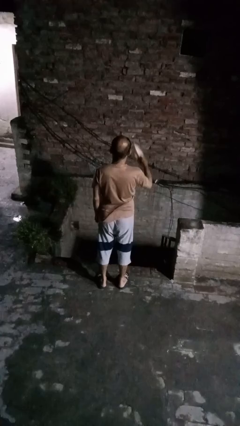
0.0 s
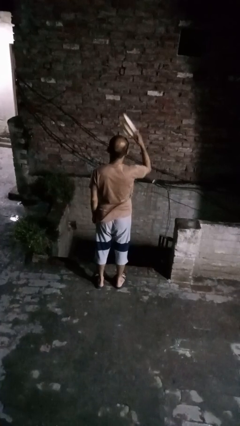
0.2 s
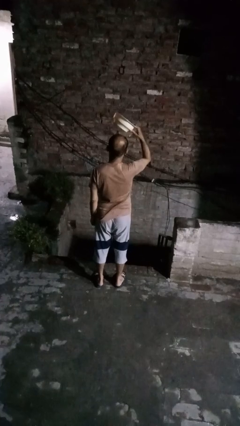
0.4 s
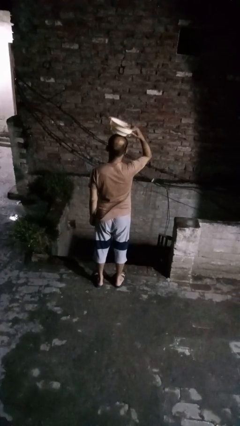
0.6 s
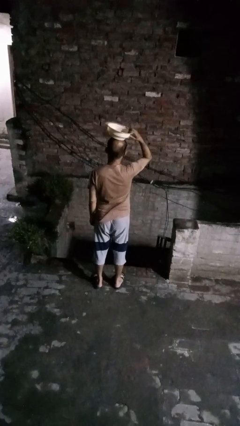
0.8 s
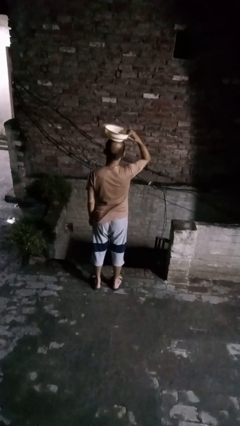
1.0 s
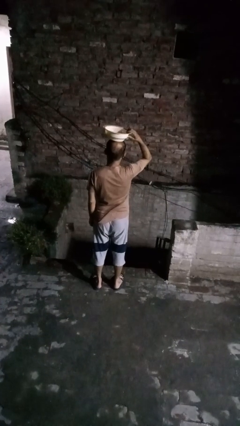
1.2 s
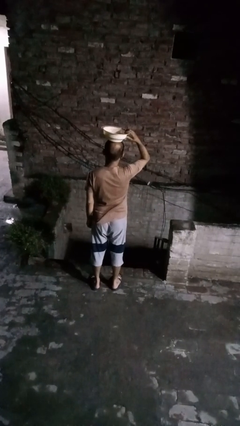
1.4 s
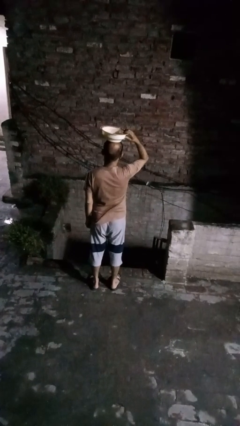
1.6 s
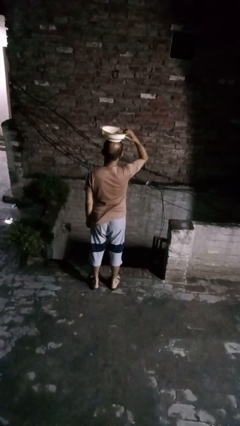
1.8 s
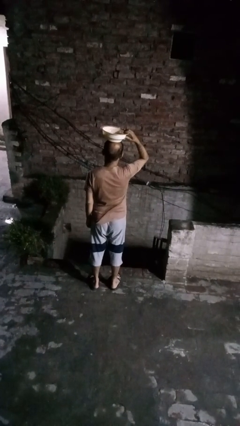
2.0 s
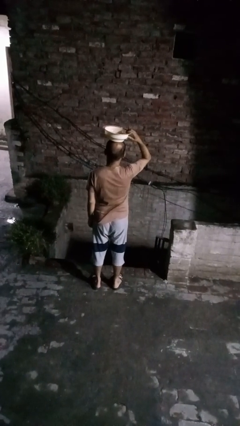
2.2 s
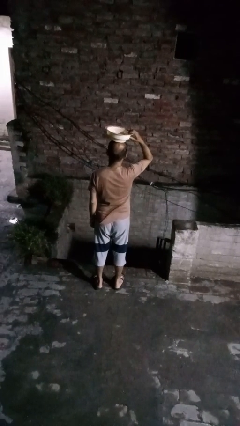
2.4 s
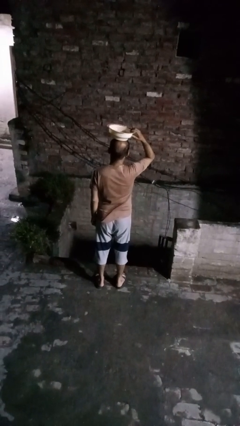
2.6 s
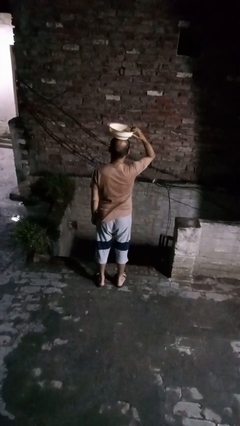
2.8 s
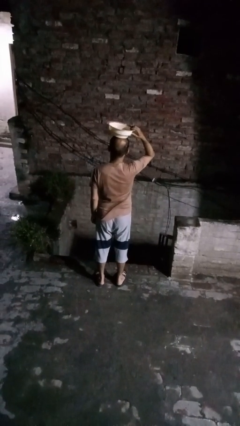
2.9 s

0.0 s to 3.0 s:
person holds object above head

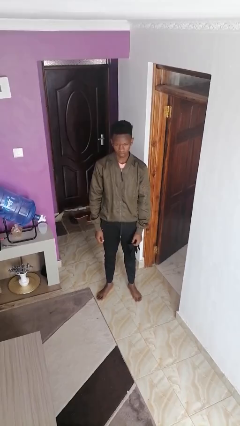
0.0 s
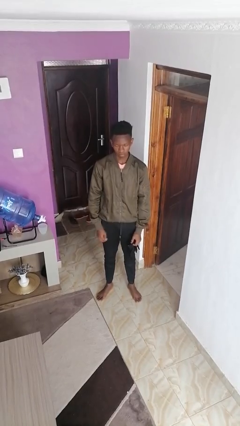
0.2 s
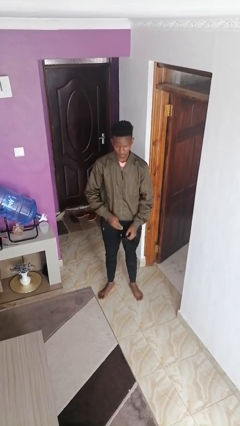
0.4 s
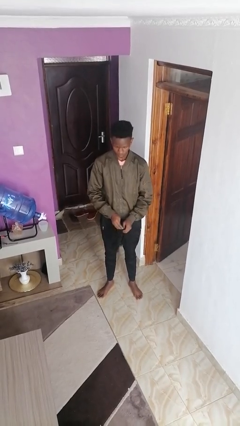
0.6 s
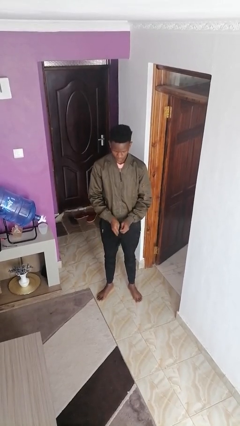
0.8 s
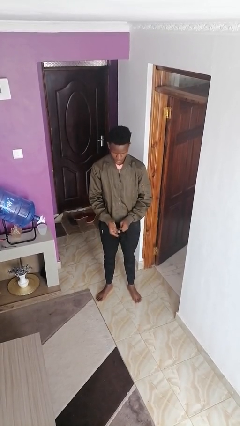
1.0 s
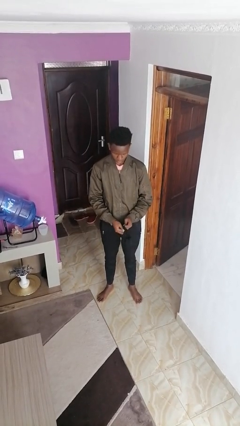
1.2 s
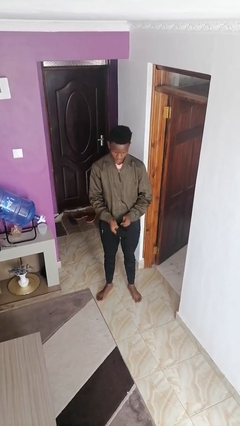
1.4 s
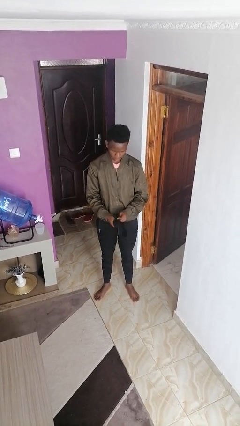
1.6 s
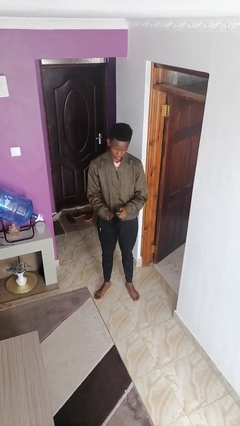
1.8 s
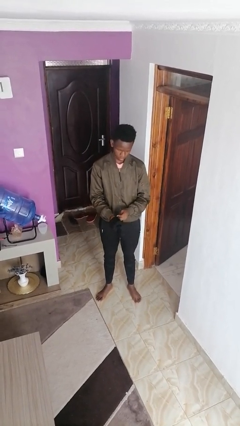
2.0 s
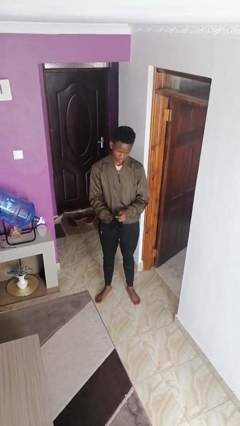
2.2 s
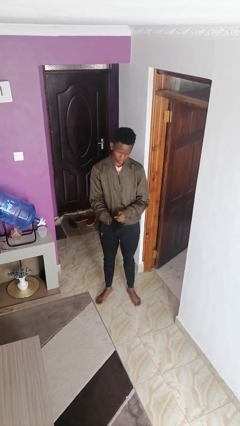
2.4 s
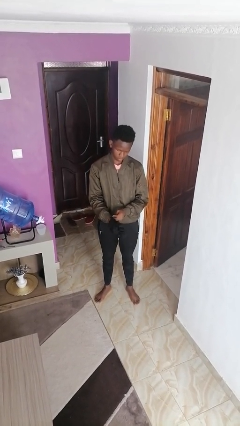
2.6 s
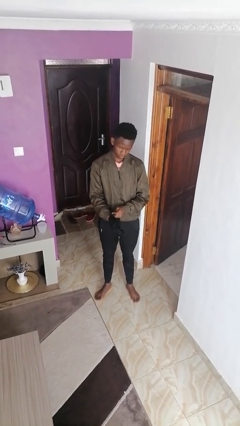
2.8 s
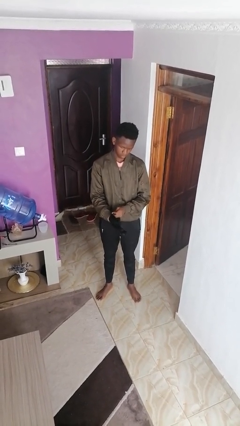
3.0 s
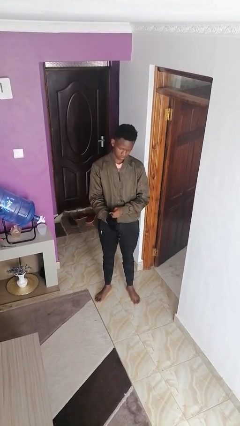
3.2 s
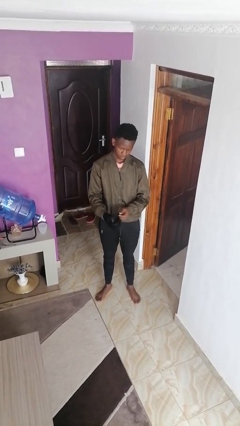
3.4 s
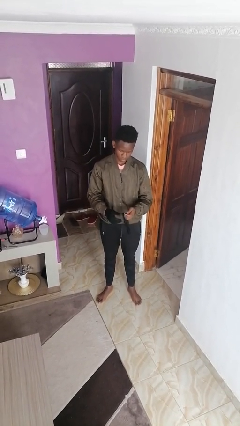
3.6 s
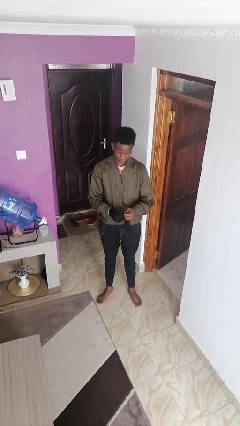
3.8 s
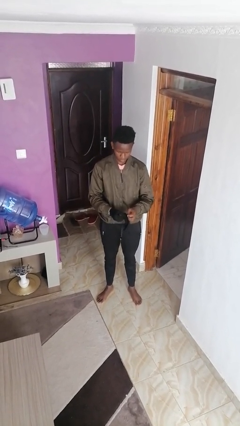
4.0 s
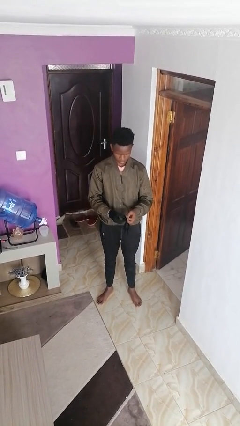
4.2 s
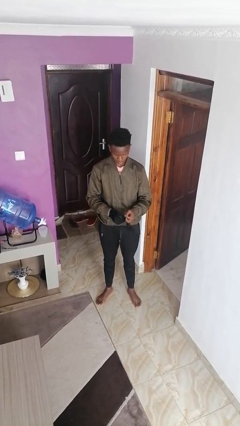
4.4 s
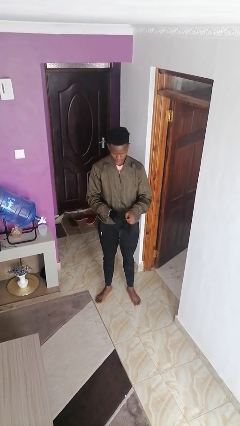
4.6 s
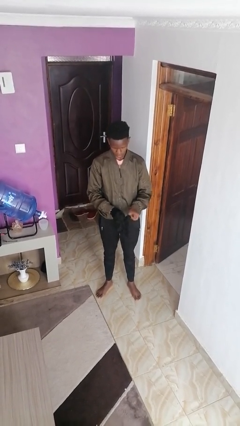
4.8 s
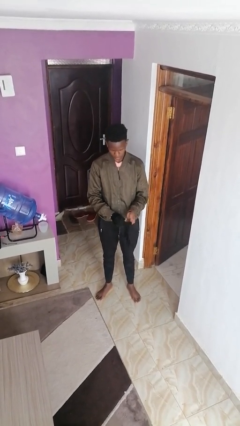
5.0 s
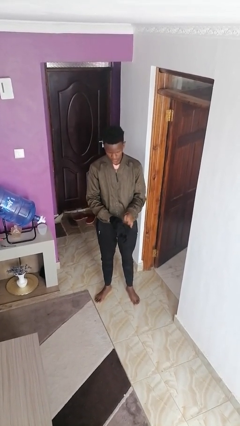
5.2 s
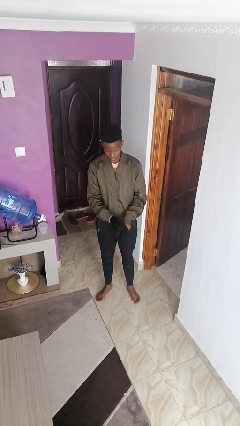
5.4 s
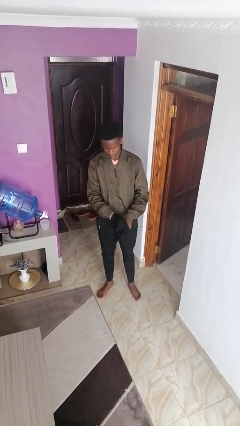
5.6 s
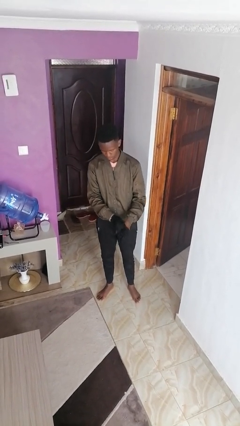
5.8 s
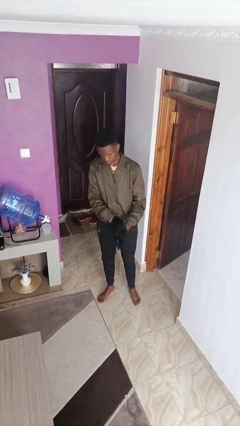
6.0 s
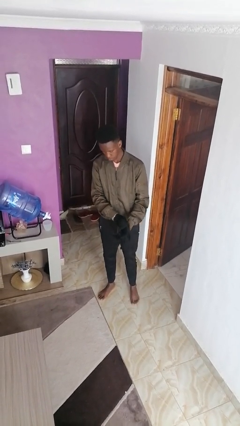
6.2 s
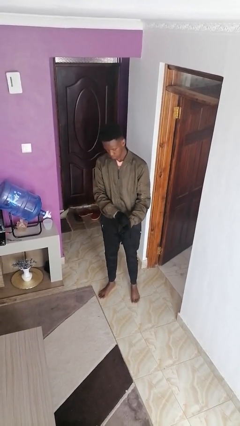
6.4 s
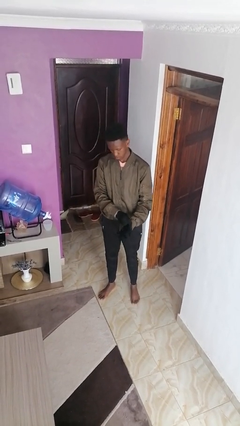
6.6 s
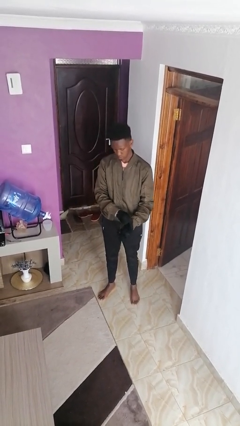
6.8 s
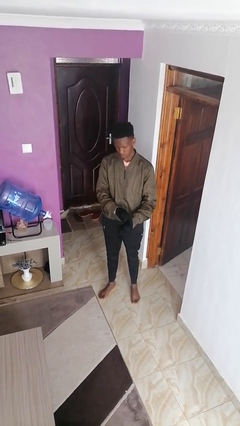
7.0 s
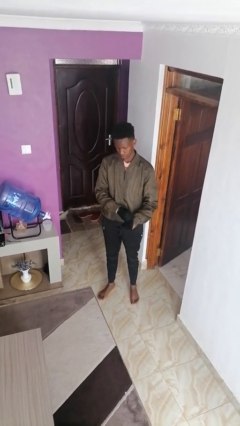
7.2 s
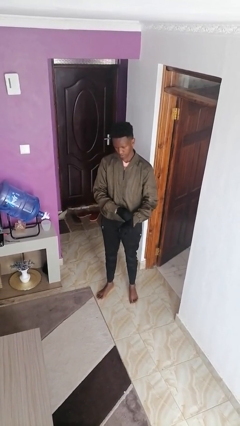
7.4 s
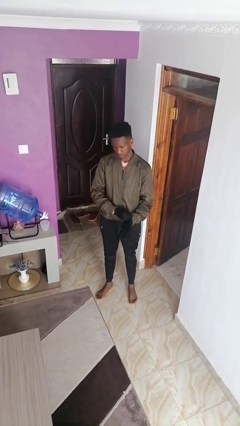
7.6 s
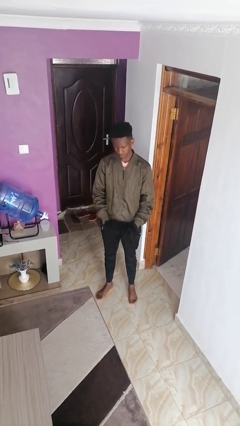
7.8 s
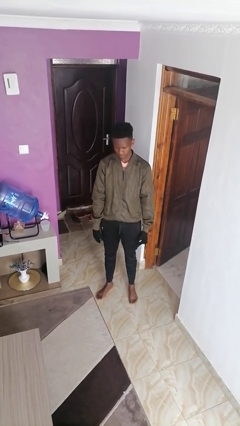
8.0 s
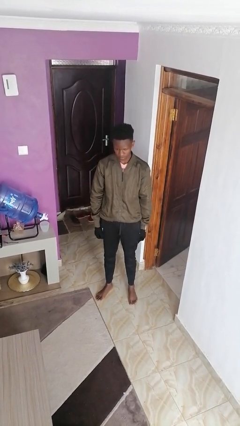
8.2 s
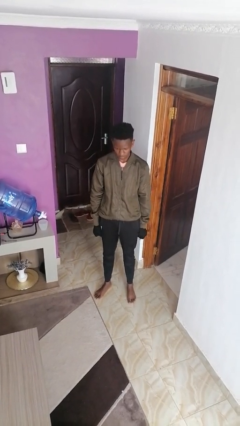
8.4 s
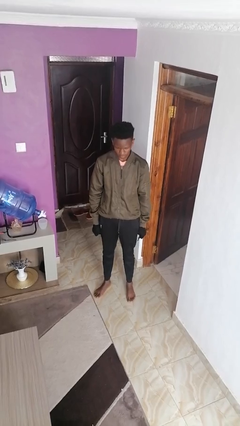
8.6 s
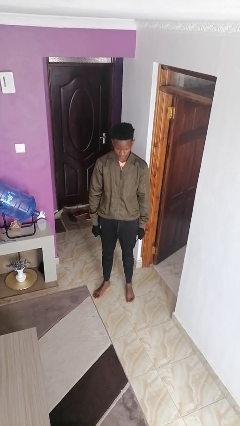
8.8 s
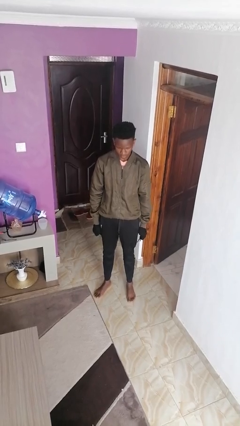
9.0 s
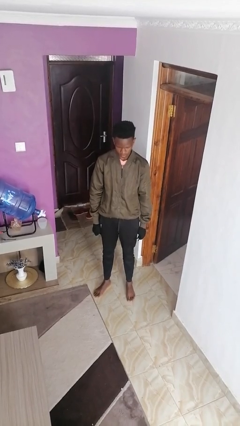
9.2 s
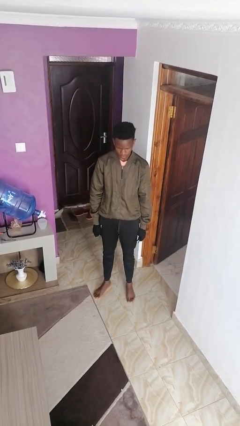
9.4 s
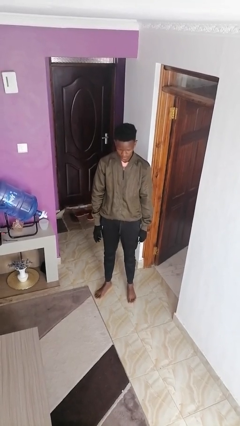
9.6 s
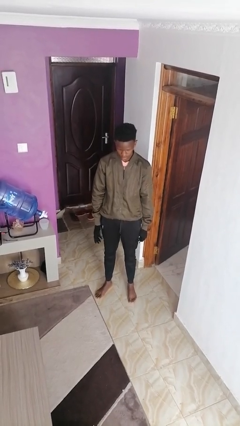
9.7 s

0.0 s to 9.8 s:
person puts on gloves

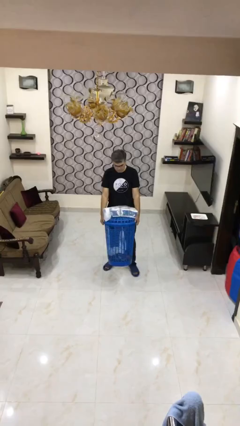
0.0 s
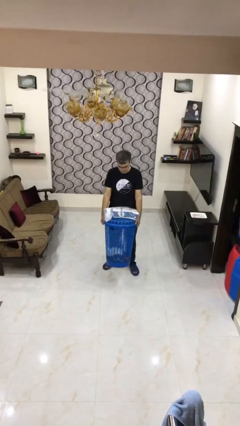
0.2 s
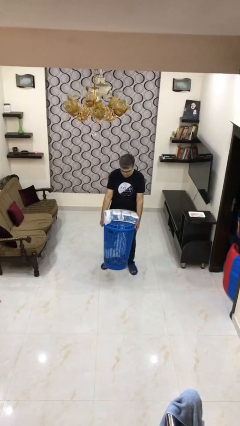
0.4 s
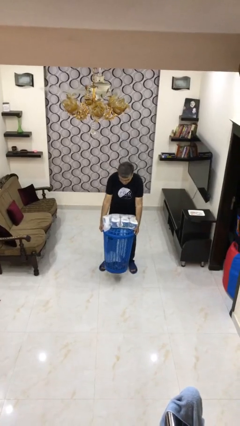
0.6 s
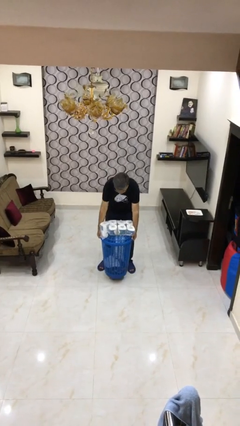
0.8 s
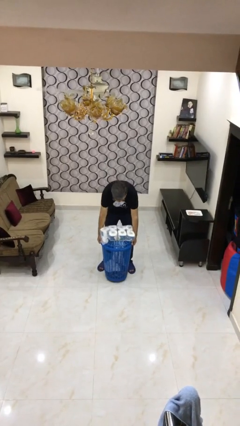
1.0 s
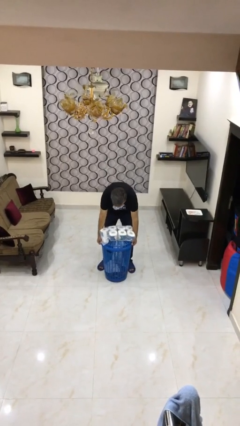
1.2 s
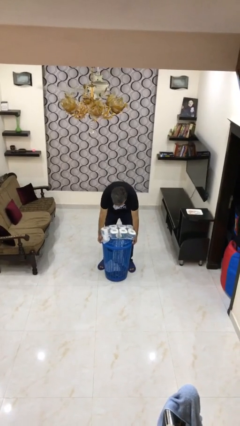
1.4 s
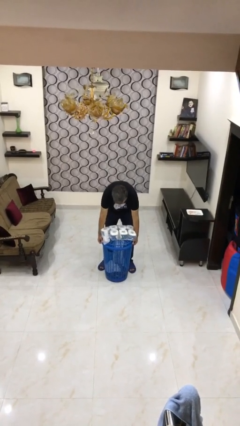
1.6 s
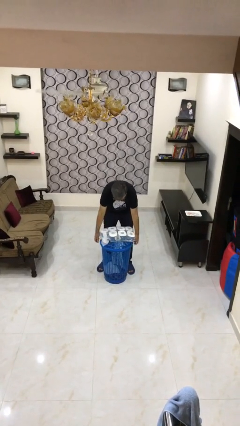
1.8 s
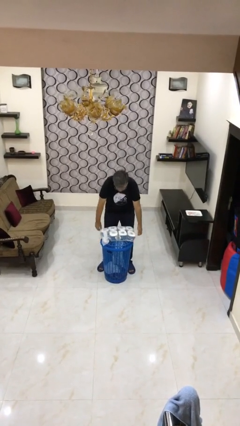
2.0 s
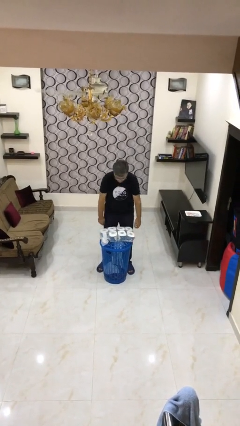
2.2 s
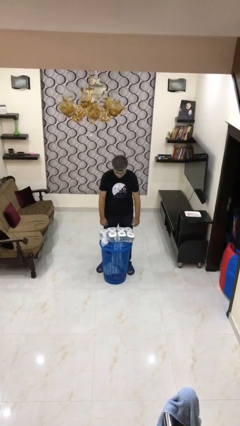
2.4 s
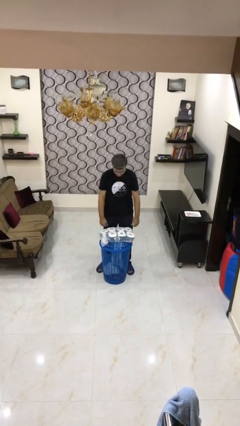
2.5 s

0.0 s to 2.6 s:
person puts down object on floor

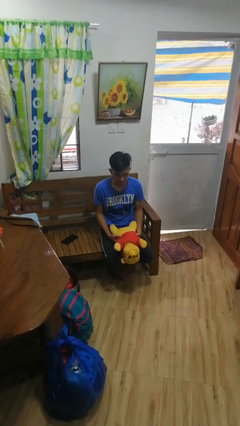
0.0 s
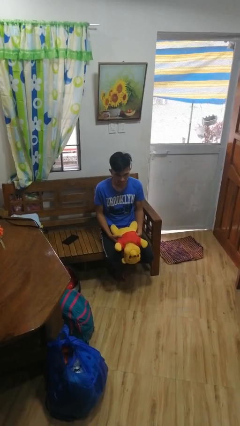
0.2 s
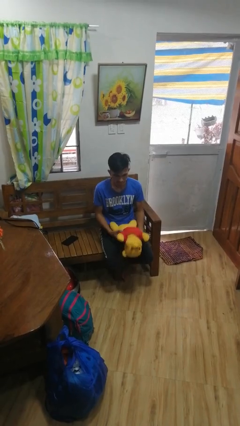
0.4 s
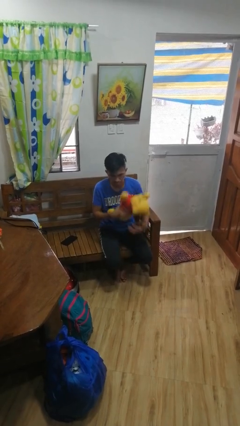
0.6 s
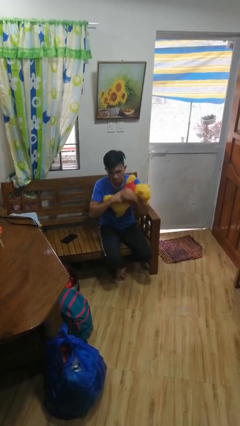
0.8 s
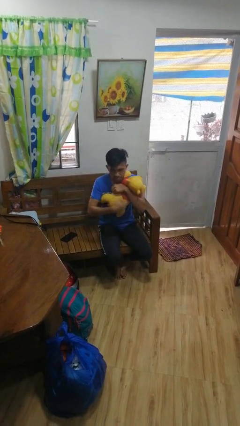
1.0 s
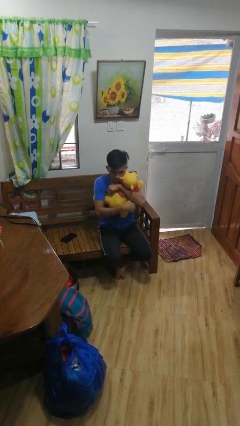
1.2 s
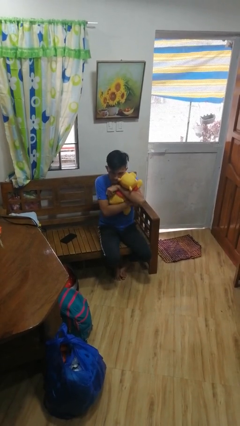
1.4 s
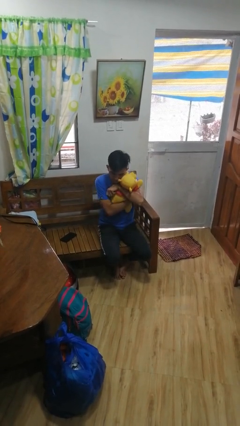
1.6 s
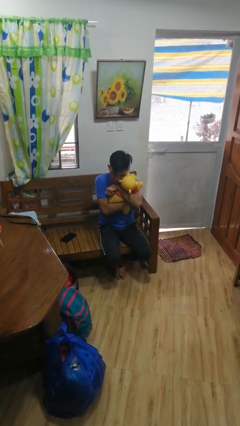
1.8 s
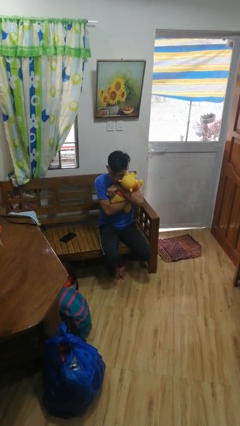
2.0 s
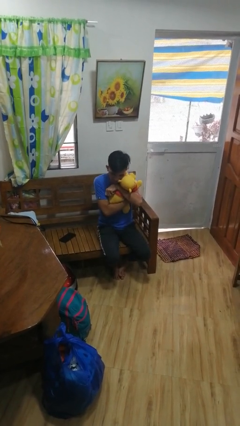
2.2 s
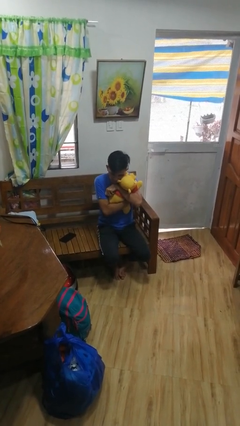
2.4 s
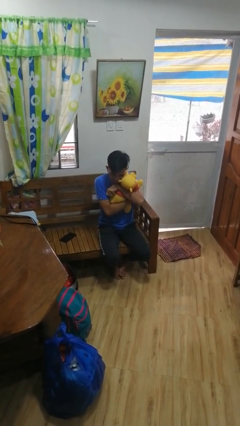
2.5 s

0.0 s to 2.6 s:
person hugs stuffed animal

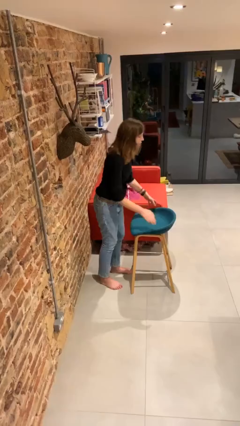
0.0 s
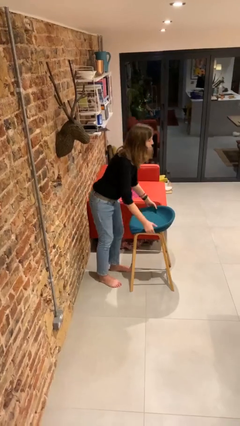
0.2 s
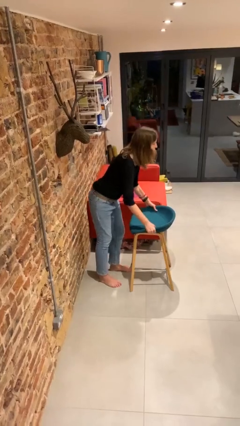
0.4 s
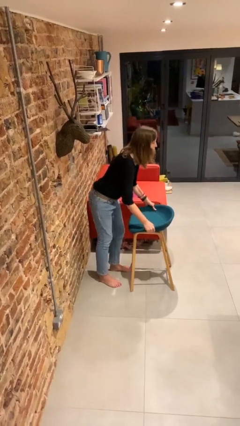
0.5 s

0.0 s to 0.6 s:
person picks up object from floor
